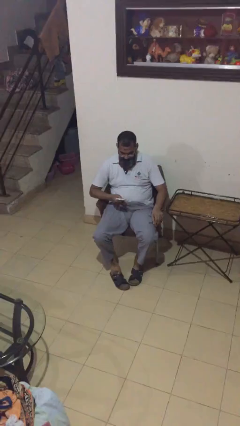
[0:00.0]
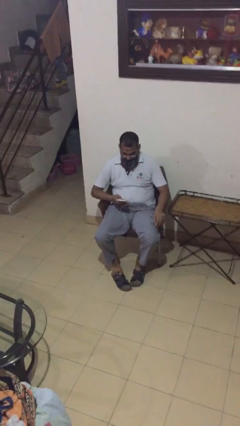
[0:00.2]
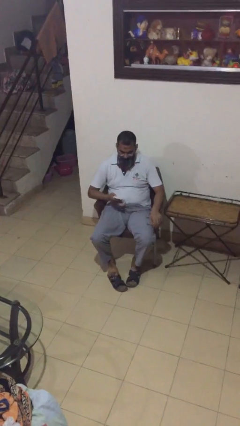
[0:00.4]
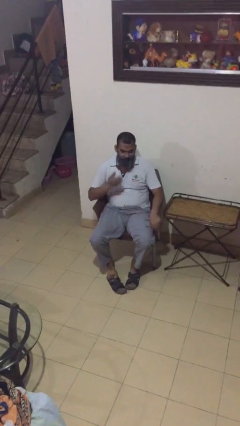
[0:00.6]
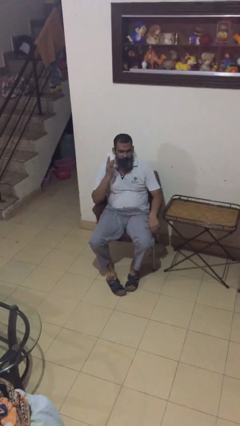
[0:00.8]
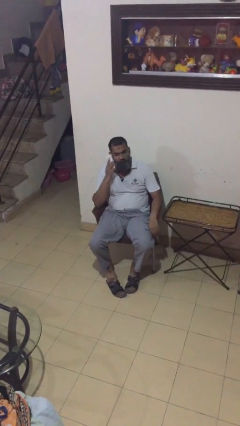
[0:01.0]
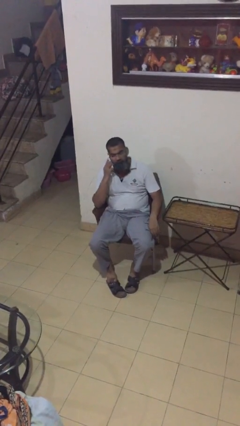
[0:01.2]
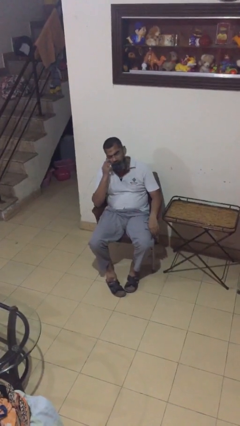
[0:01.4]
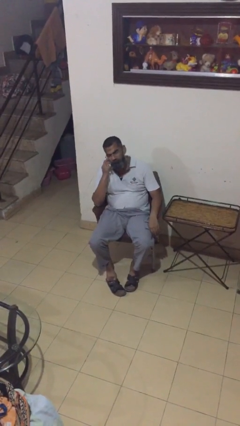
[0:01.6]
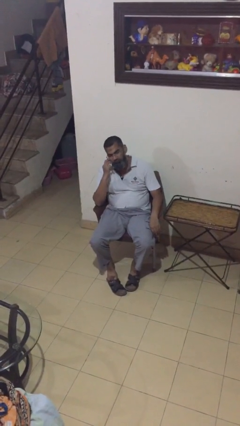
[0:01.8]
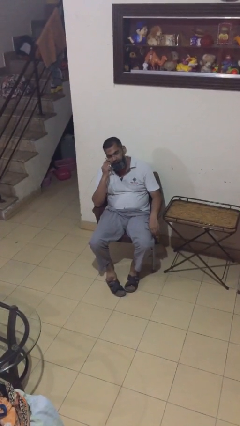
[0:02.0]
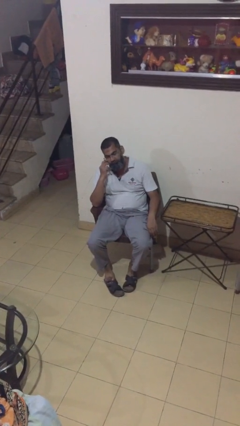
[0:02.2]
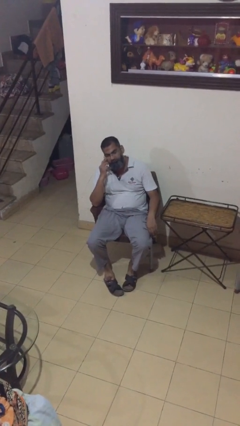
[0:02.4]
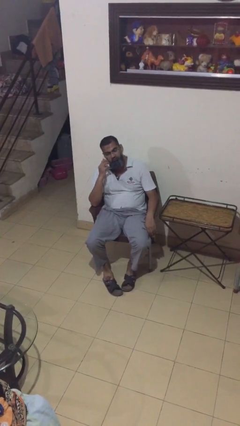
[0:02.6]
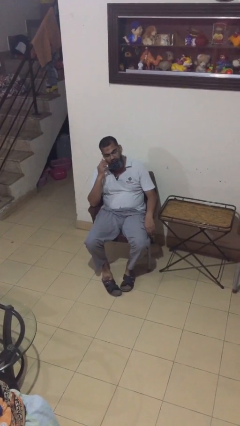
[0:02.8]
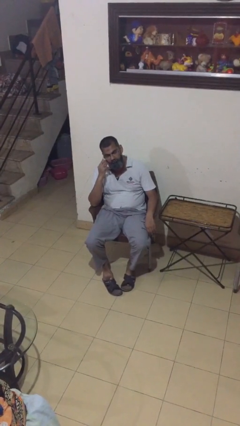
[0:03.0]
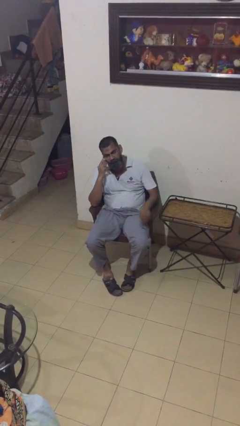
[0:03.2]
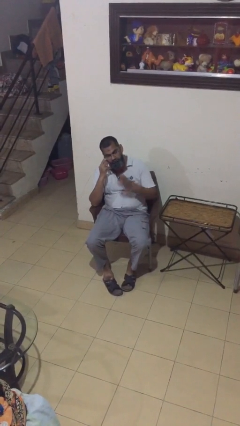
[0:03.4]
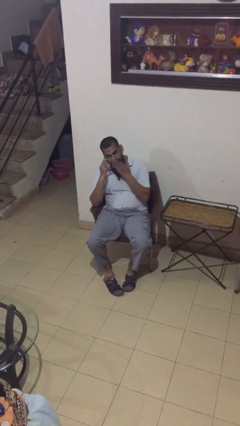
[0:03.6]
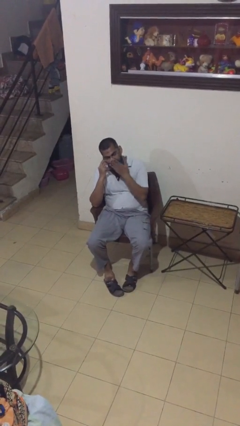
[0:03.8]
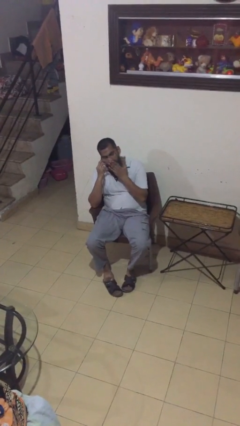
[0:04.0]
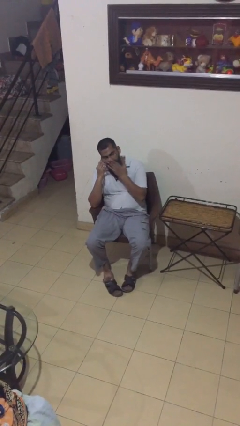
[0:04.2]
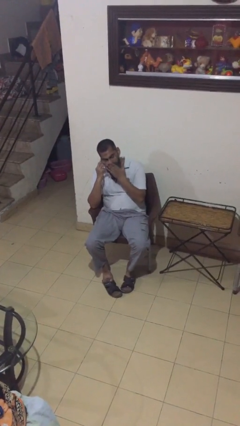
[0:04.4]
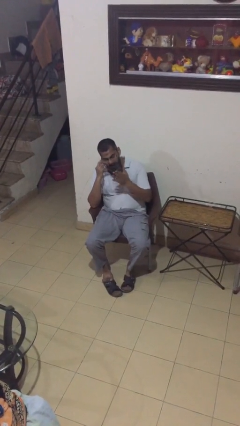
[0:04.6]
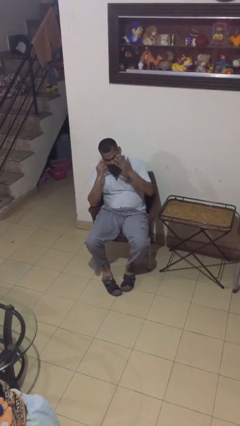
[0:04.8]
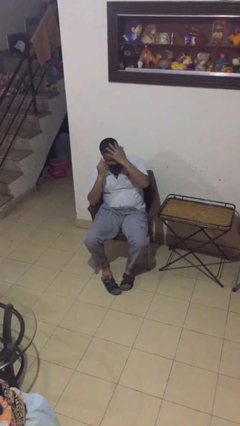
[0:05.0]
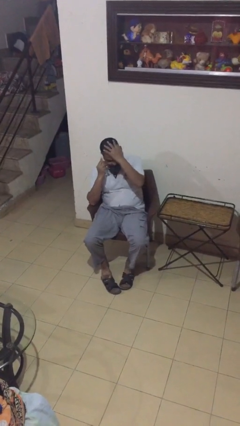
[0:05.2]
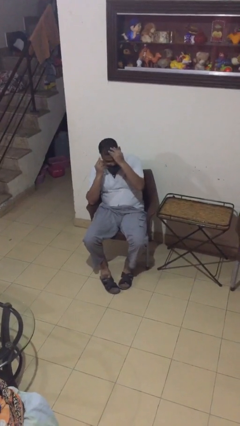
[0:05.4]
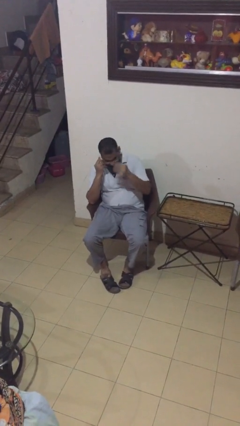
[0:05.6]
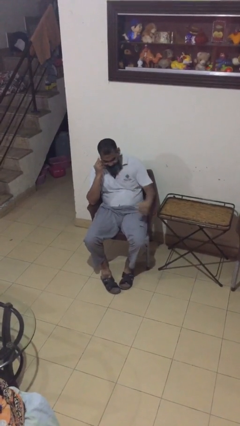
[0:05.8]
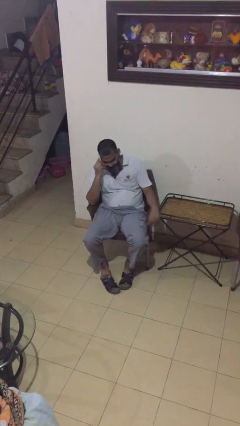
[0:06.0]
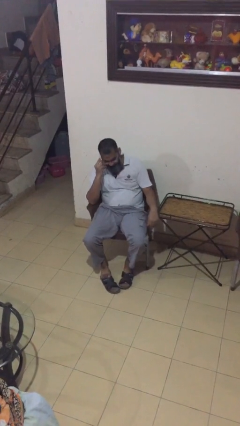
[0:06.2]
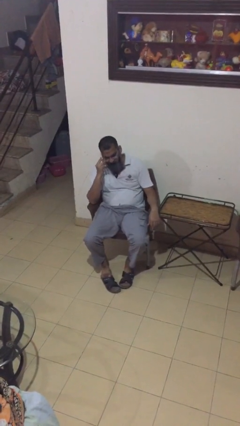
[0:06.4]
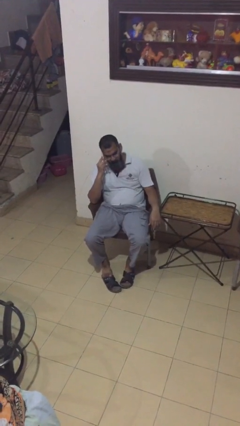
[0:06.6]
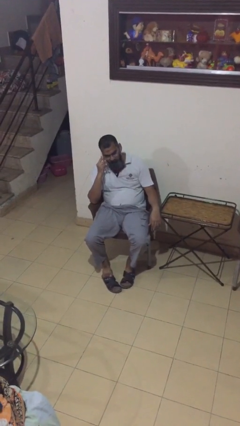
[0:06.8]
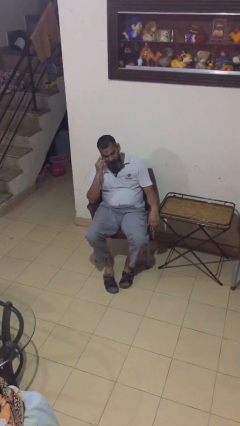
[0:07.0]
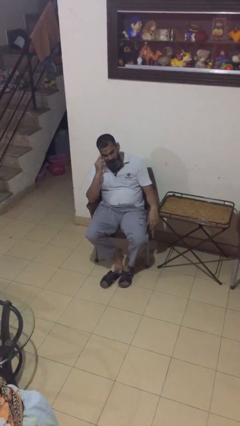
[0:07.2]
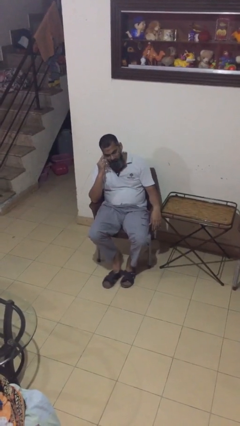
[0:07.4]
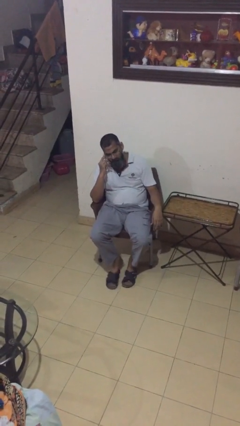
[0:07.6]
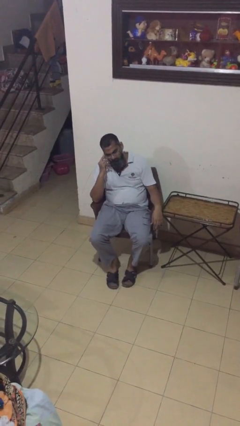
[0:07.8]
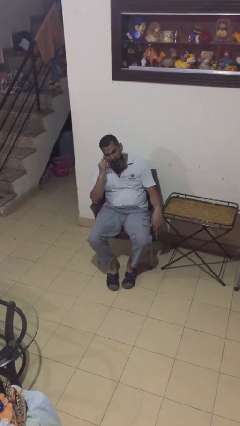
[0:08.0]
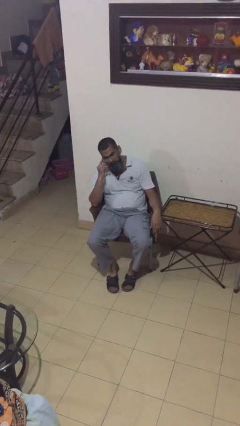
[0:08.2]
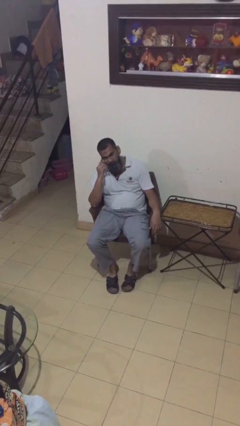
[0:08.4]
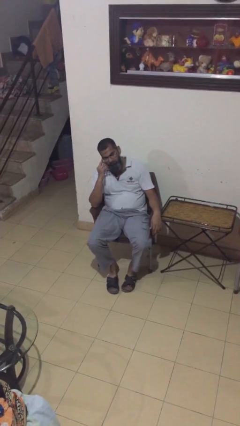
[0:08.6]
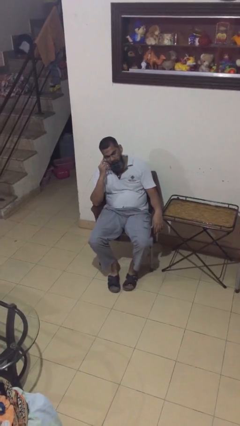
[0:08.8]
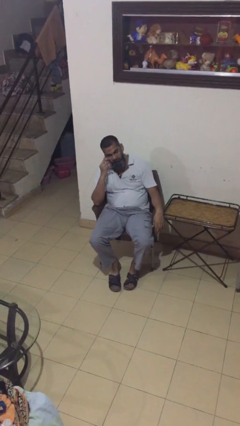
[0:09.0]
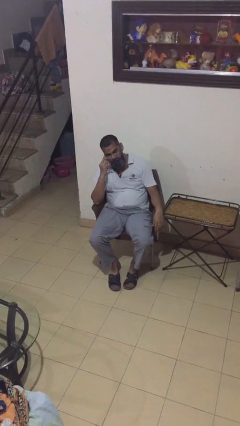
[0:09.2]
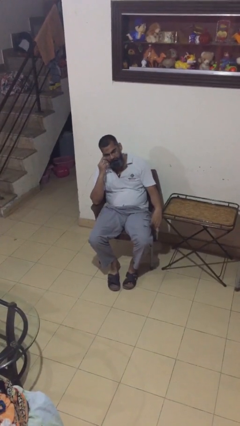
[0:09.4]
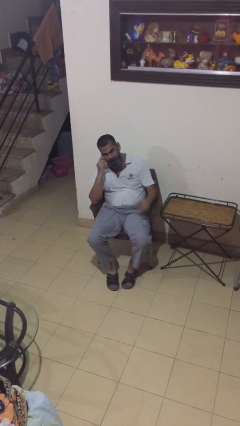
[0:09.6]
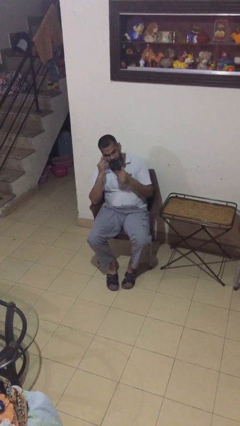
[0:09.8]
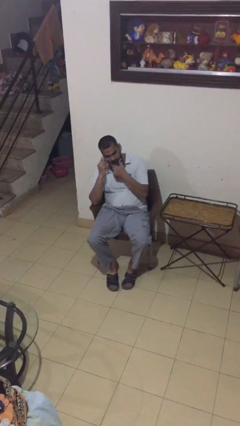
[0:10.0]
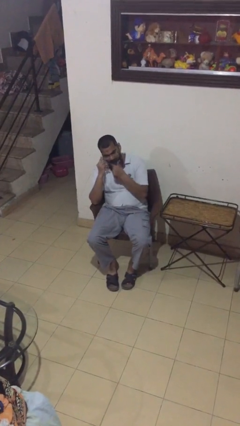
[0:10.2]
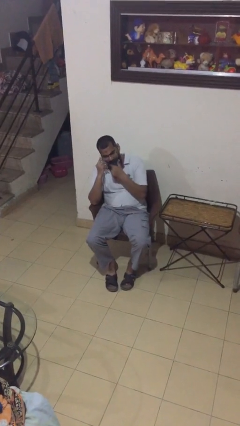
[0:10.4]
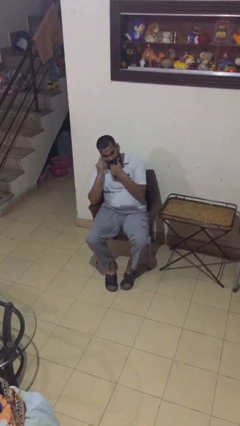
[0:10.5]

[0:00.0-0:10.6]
person talks on phone

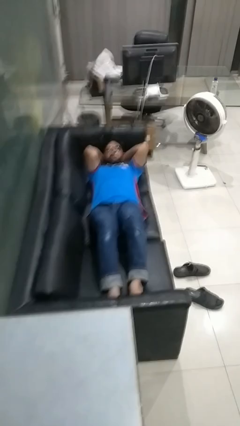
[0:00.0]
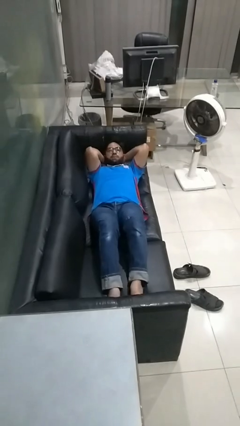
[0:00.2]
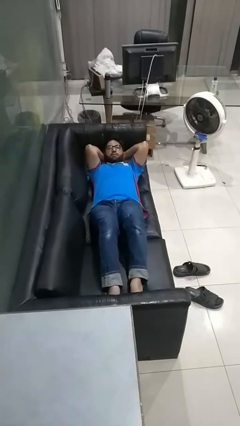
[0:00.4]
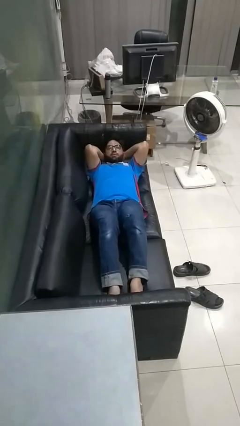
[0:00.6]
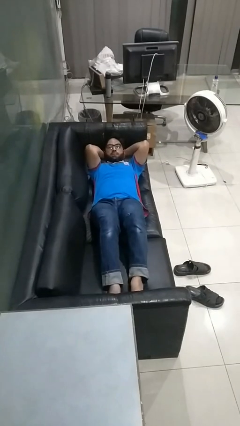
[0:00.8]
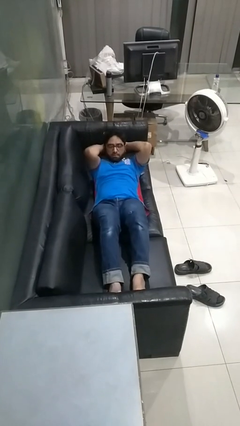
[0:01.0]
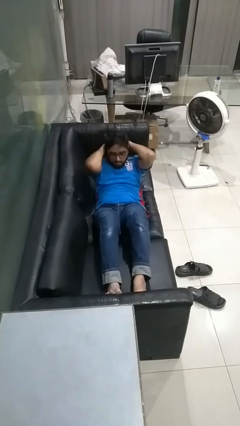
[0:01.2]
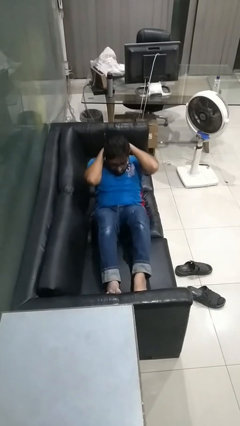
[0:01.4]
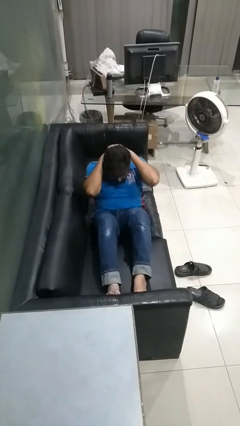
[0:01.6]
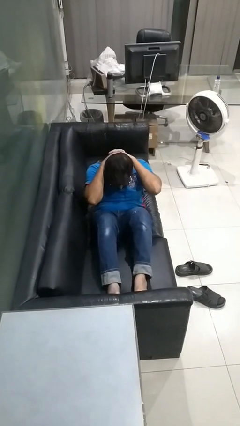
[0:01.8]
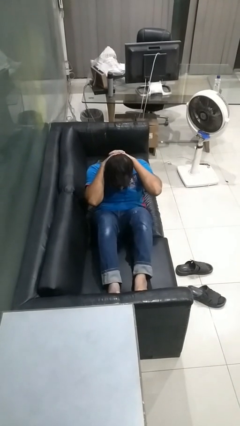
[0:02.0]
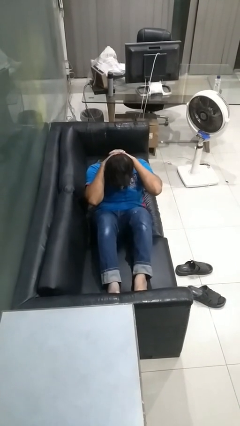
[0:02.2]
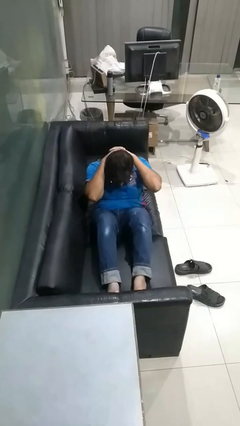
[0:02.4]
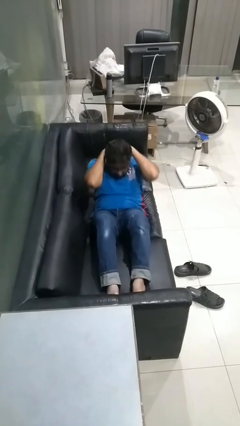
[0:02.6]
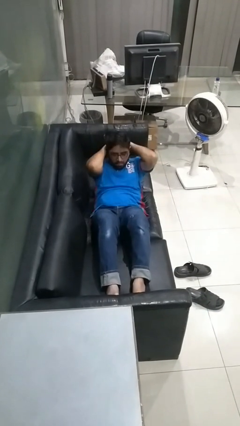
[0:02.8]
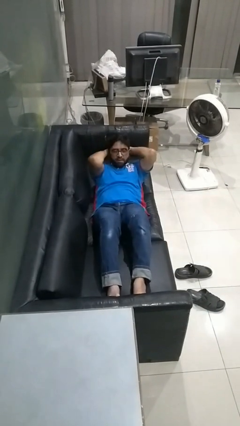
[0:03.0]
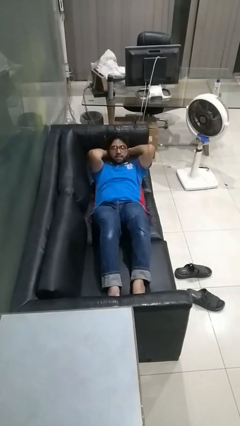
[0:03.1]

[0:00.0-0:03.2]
person exercises with situp

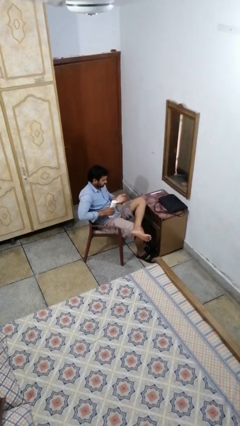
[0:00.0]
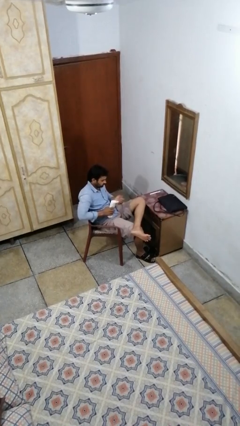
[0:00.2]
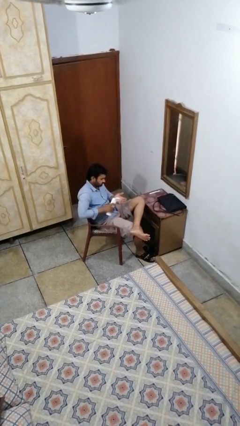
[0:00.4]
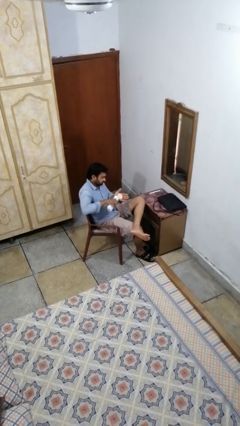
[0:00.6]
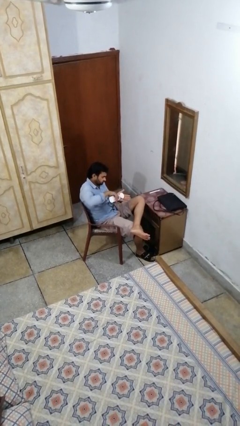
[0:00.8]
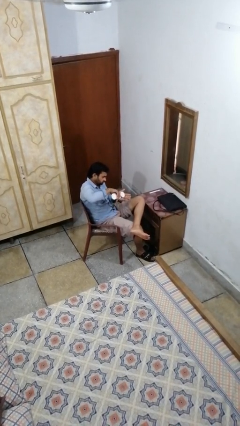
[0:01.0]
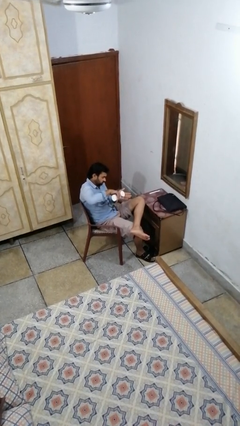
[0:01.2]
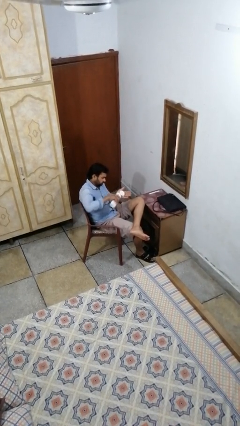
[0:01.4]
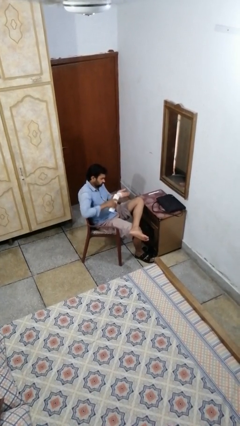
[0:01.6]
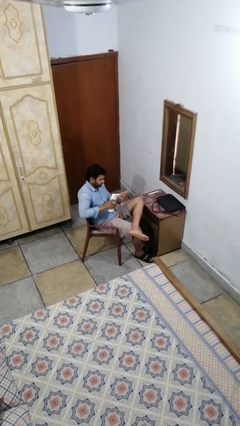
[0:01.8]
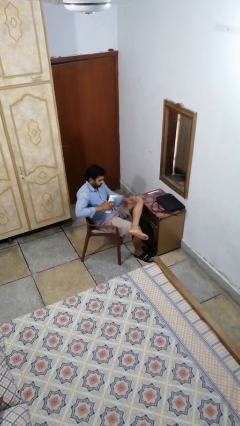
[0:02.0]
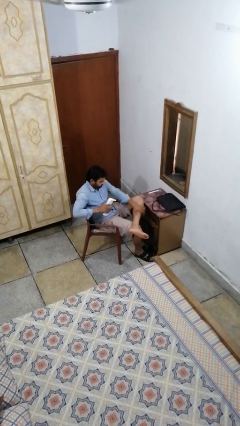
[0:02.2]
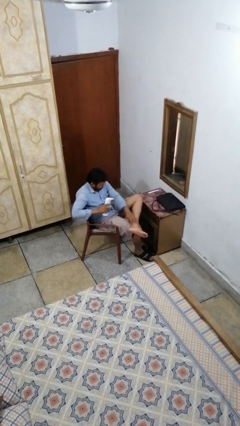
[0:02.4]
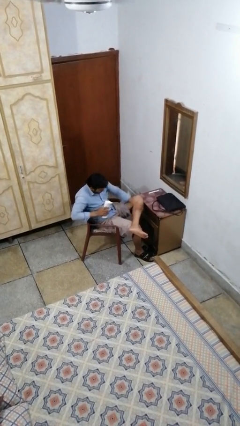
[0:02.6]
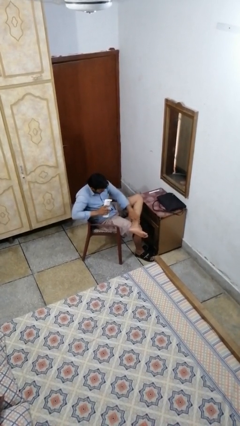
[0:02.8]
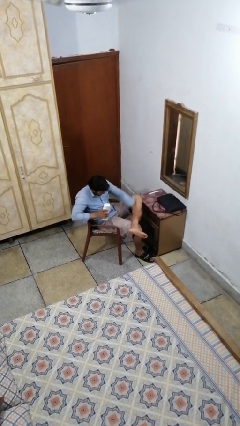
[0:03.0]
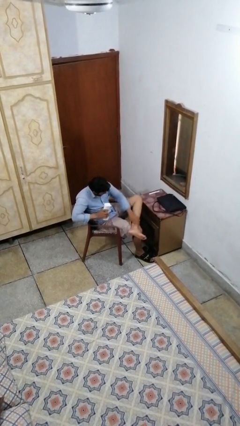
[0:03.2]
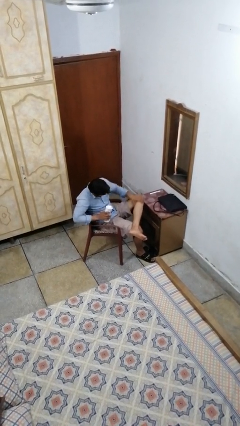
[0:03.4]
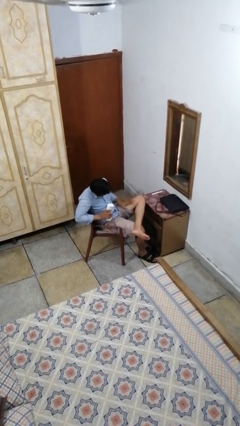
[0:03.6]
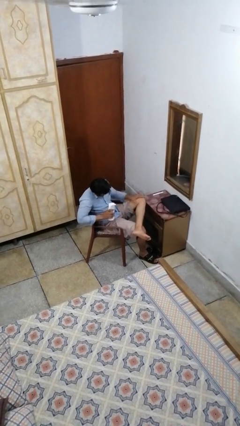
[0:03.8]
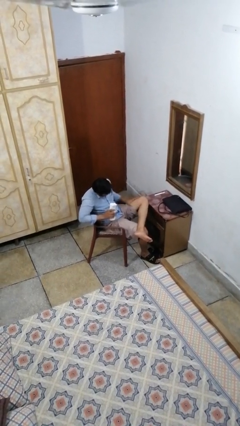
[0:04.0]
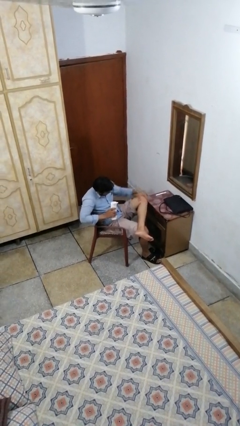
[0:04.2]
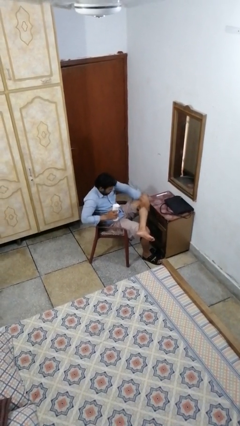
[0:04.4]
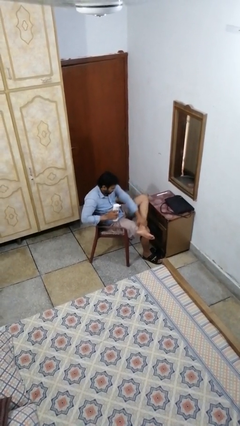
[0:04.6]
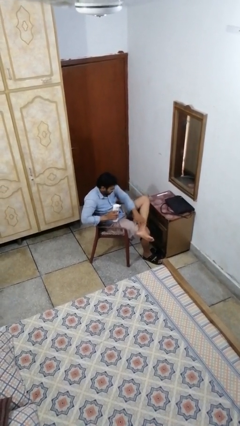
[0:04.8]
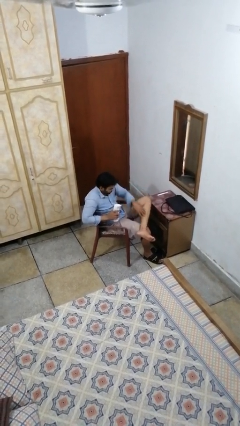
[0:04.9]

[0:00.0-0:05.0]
person applies sunscreen
